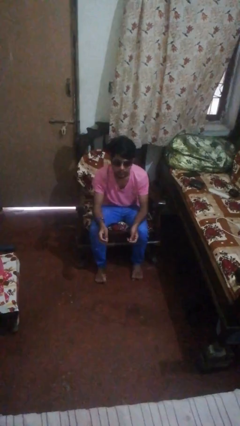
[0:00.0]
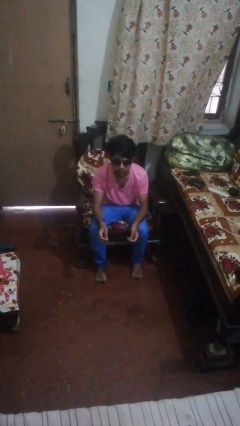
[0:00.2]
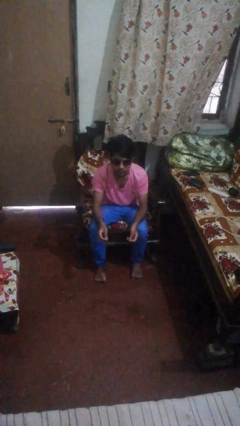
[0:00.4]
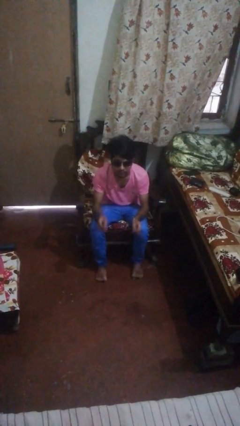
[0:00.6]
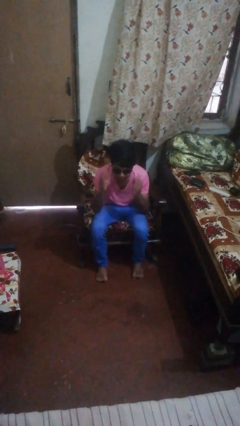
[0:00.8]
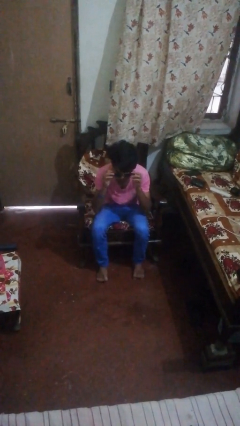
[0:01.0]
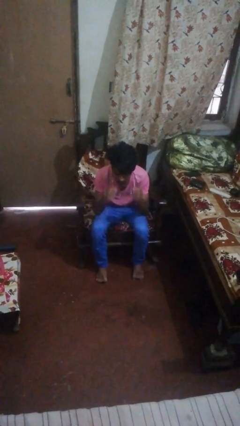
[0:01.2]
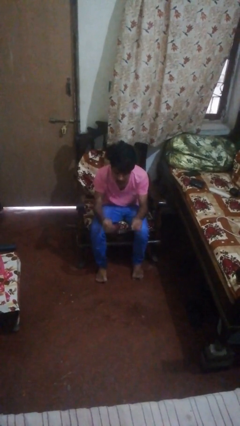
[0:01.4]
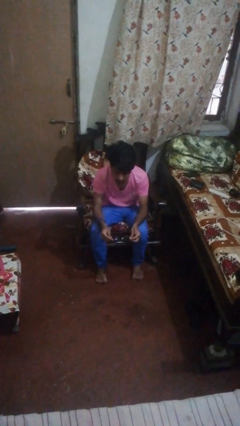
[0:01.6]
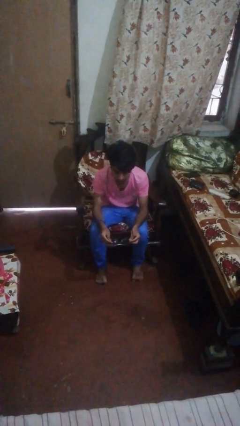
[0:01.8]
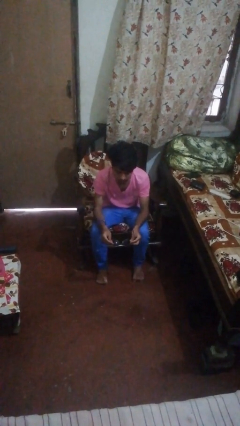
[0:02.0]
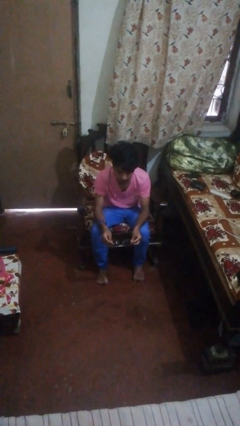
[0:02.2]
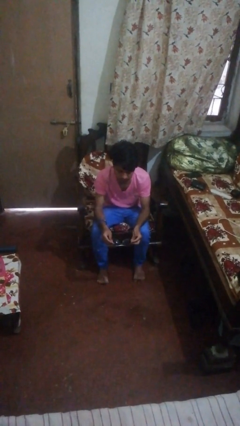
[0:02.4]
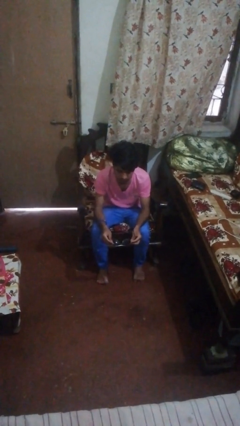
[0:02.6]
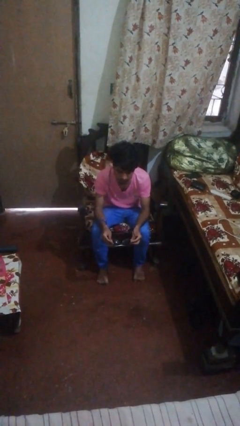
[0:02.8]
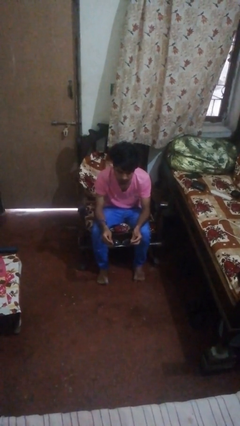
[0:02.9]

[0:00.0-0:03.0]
person takes off sunglasses

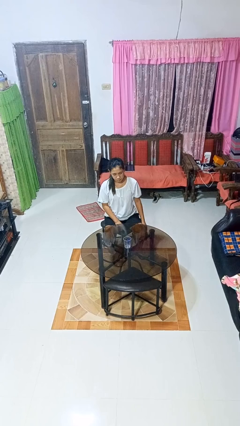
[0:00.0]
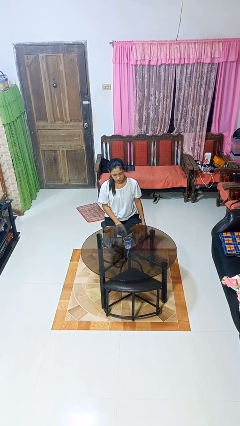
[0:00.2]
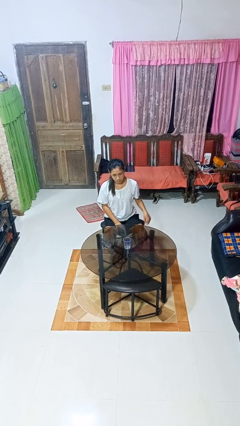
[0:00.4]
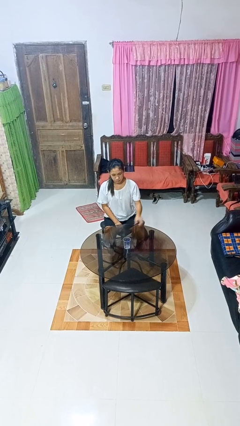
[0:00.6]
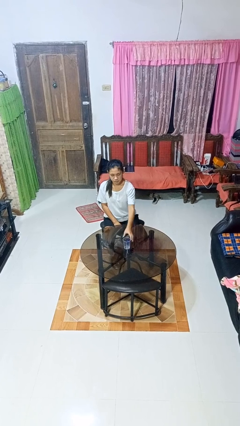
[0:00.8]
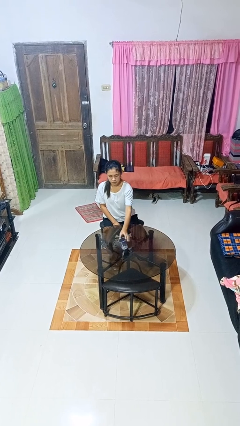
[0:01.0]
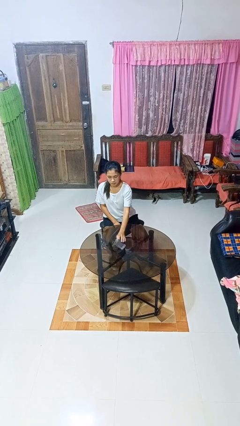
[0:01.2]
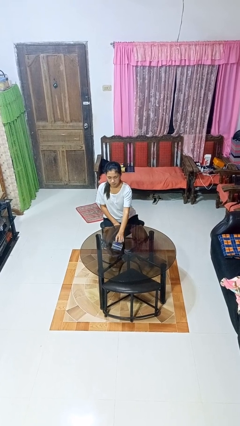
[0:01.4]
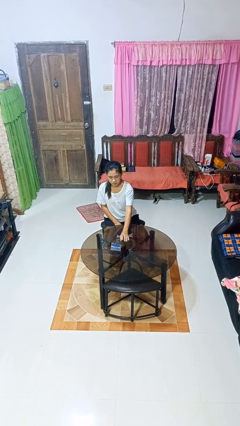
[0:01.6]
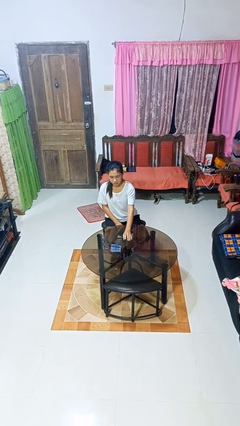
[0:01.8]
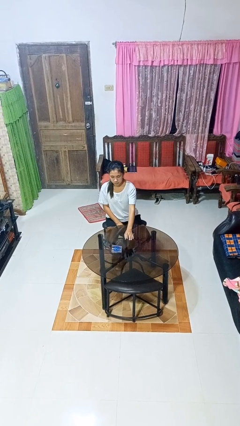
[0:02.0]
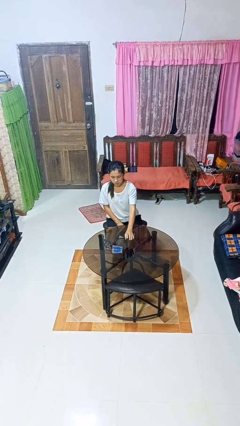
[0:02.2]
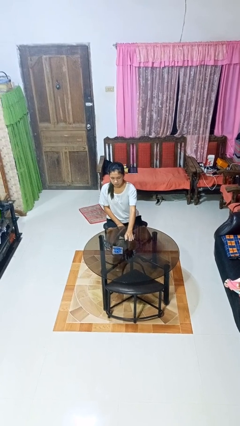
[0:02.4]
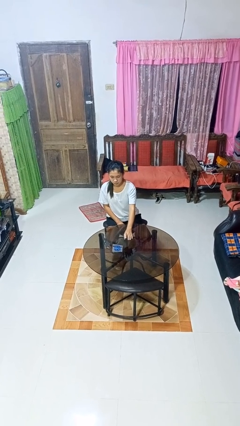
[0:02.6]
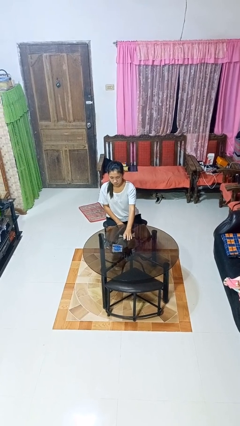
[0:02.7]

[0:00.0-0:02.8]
person knocks over glass

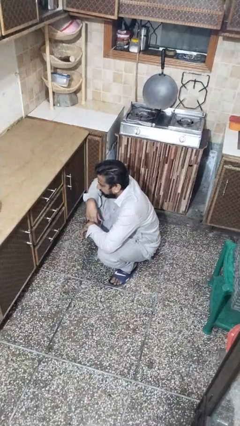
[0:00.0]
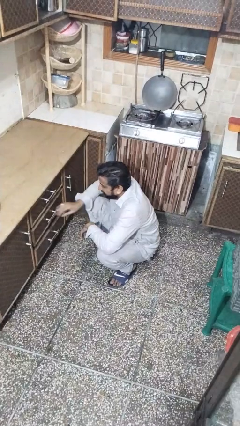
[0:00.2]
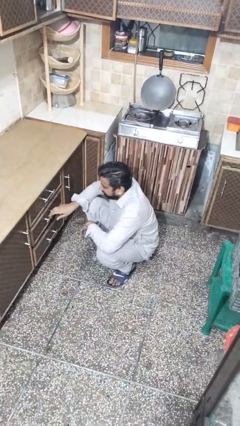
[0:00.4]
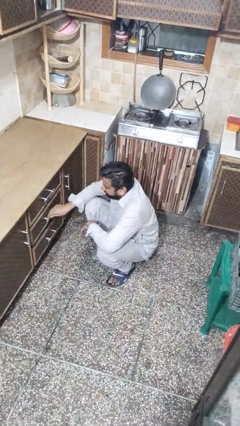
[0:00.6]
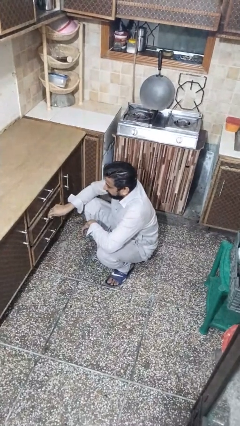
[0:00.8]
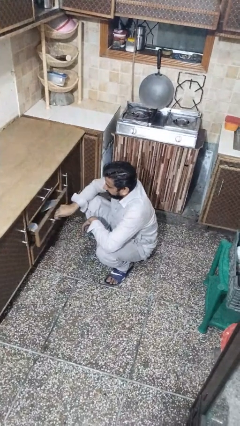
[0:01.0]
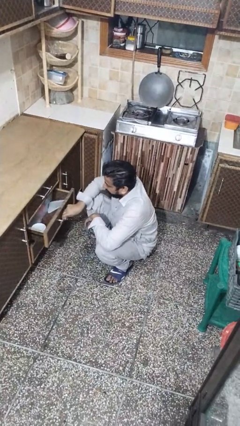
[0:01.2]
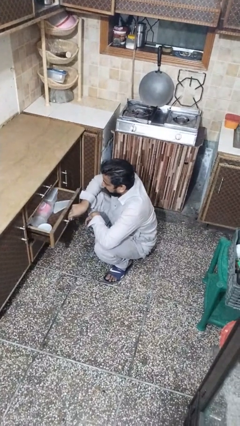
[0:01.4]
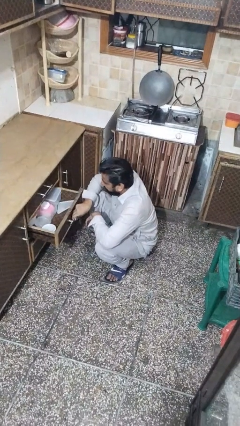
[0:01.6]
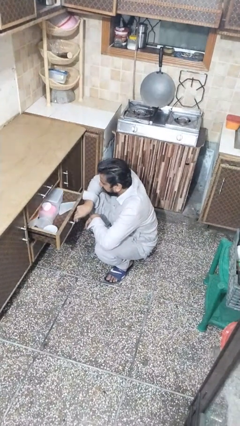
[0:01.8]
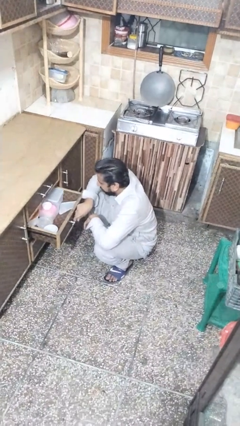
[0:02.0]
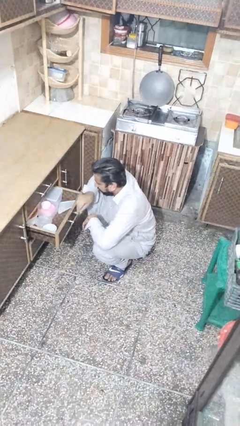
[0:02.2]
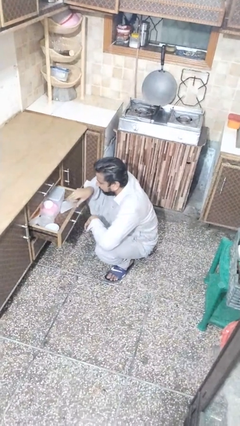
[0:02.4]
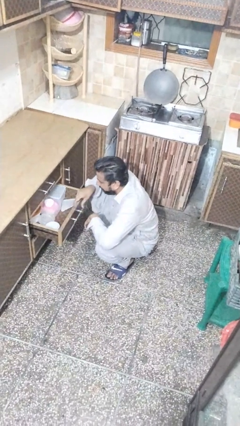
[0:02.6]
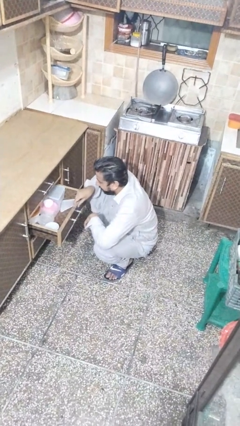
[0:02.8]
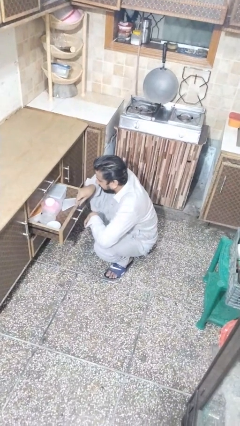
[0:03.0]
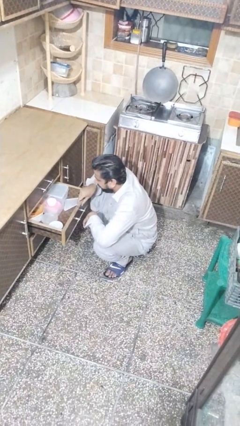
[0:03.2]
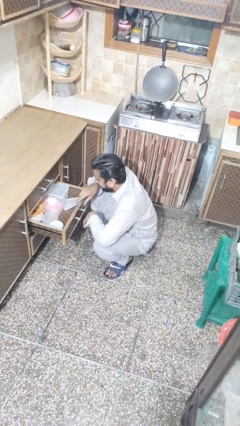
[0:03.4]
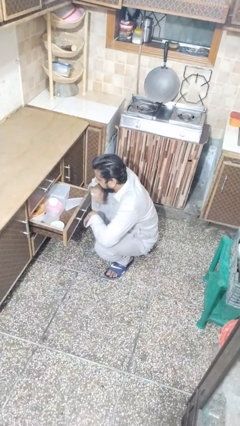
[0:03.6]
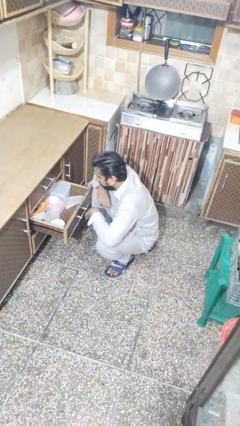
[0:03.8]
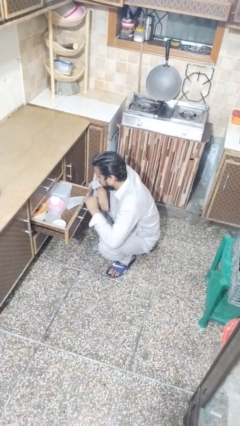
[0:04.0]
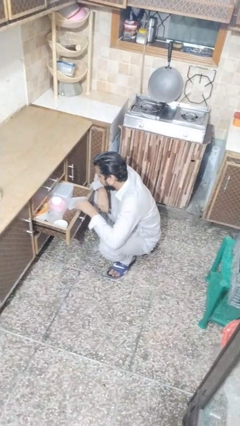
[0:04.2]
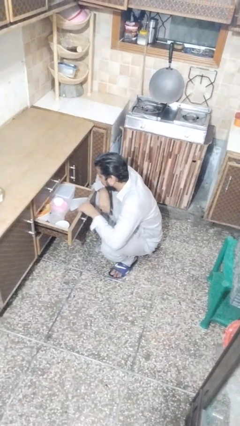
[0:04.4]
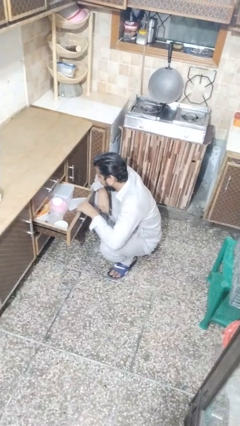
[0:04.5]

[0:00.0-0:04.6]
person opens kitchen drawer

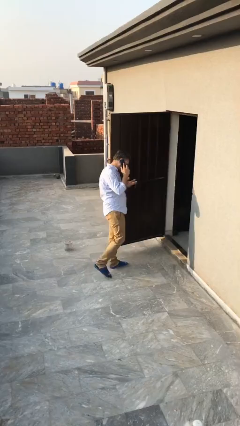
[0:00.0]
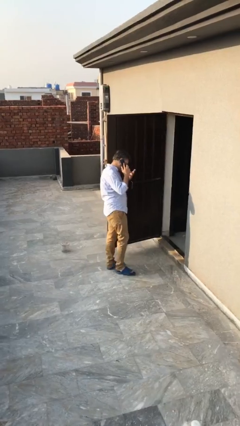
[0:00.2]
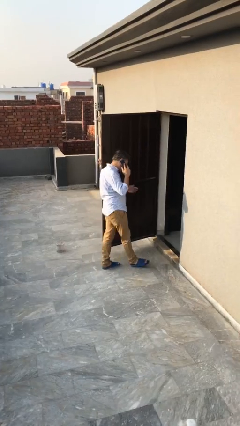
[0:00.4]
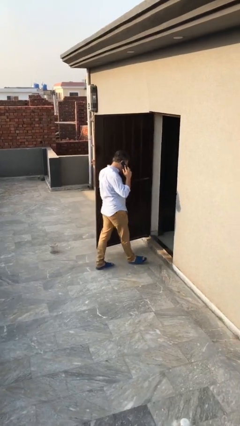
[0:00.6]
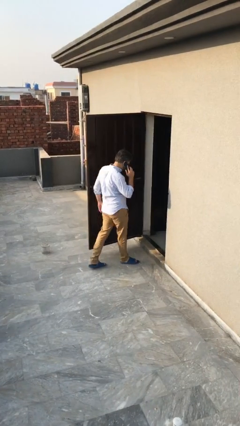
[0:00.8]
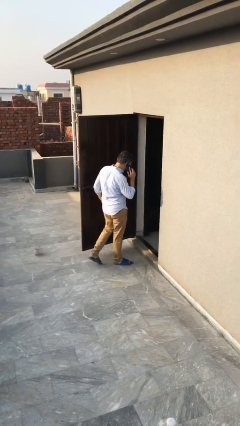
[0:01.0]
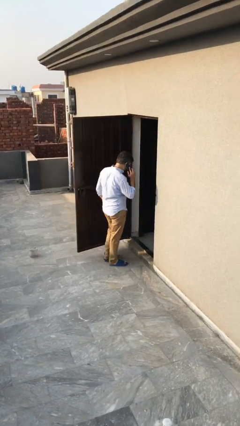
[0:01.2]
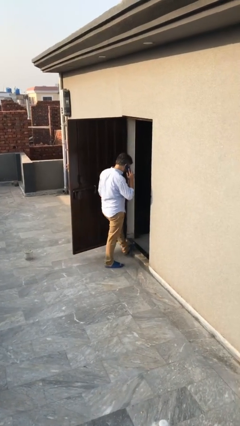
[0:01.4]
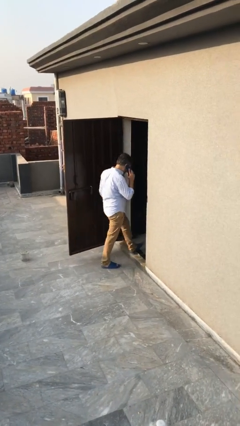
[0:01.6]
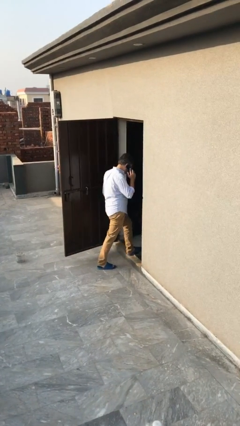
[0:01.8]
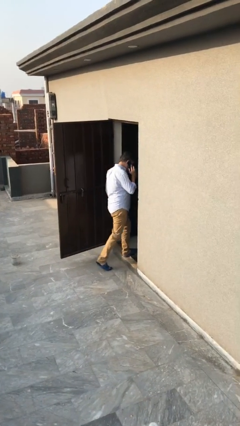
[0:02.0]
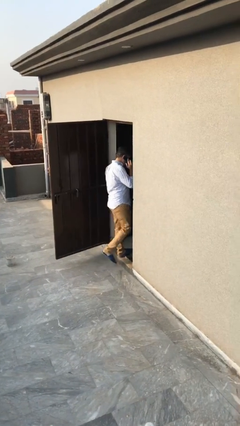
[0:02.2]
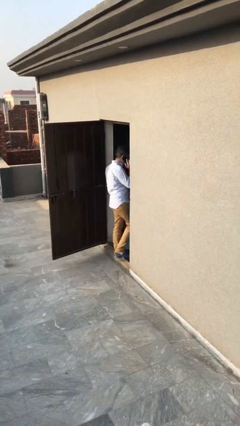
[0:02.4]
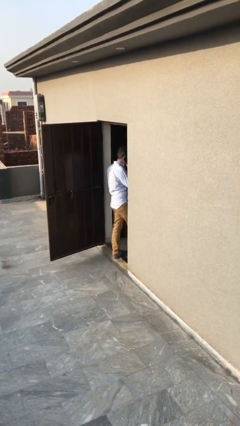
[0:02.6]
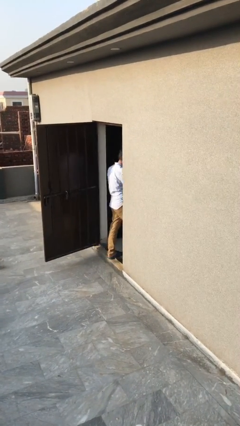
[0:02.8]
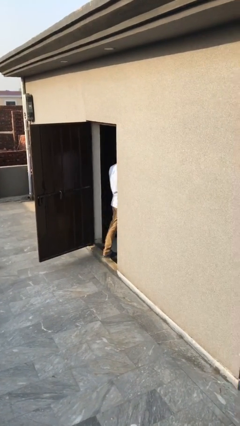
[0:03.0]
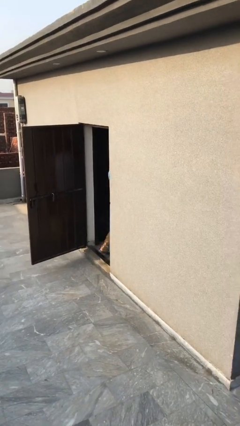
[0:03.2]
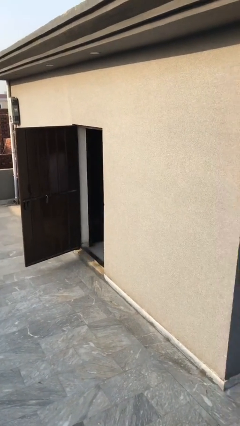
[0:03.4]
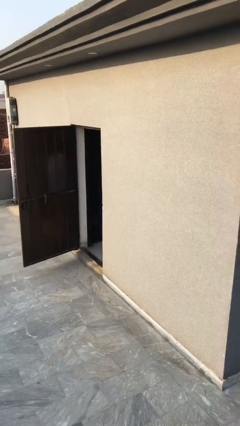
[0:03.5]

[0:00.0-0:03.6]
person exits scene through structure

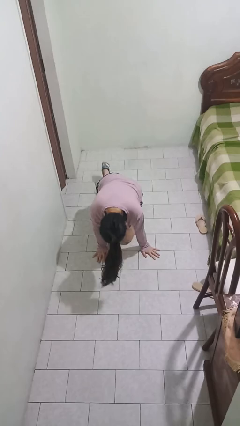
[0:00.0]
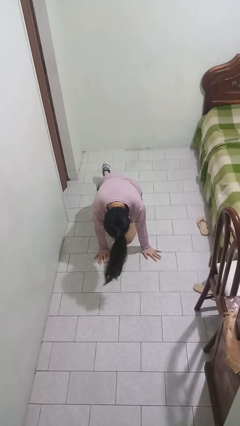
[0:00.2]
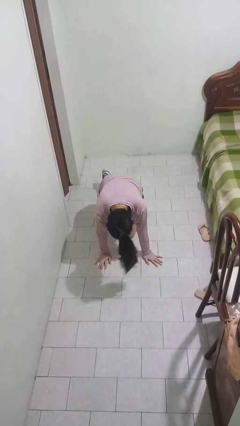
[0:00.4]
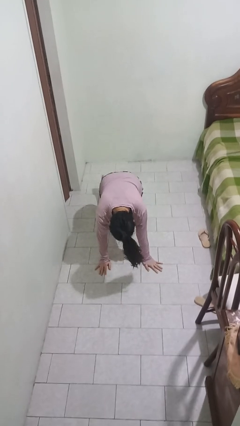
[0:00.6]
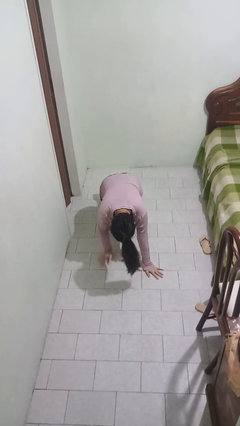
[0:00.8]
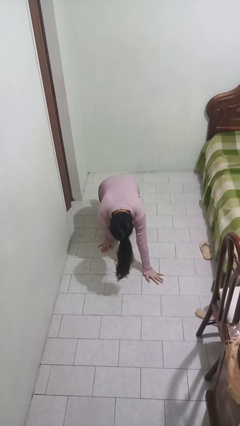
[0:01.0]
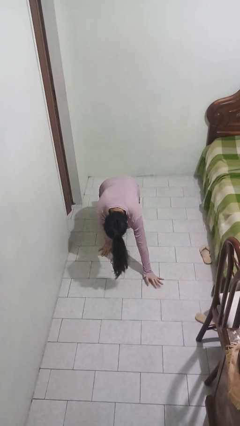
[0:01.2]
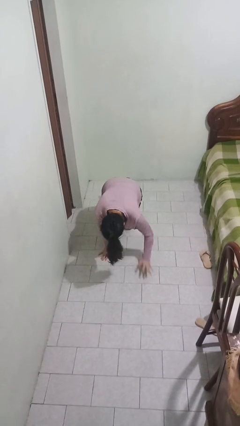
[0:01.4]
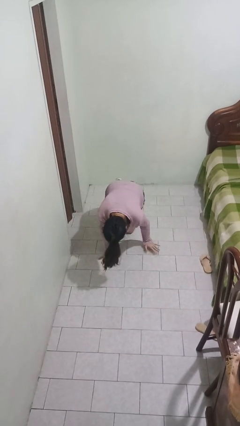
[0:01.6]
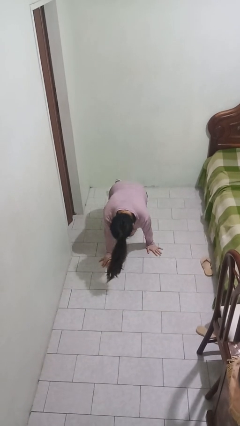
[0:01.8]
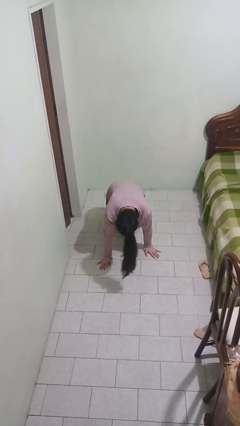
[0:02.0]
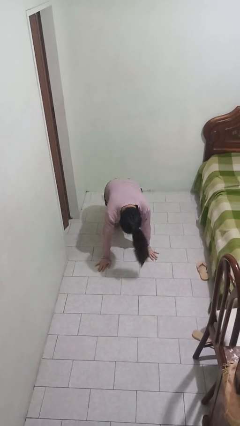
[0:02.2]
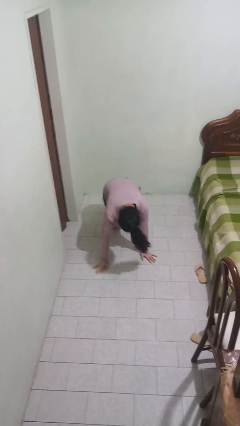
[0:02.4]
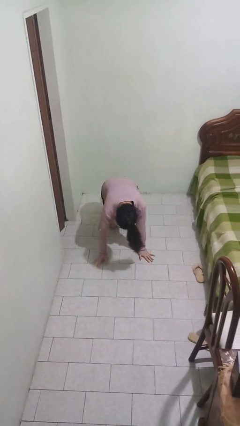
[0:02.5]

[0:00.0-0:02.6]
person crawls

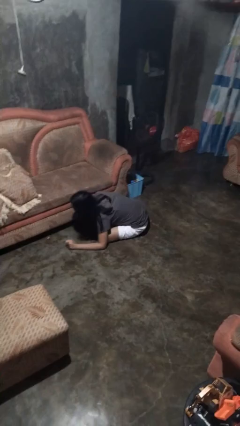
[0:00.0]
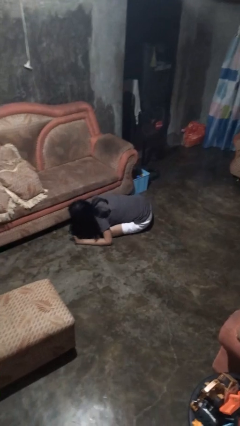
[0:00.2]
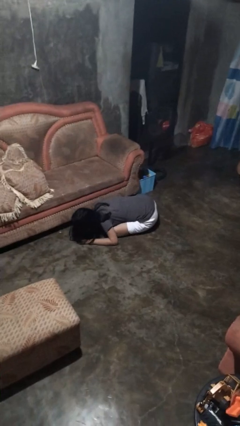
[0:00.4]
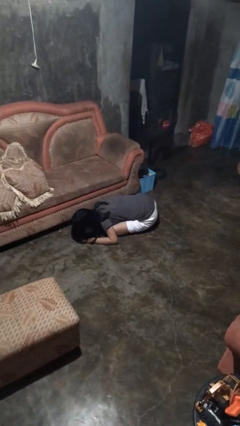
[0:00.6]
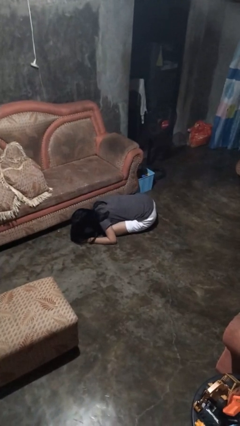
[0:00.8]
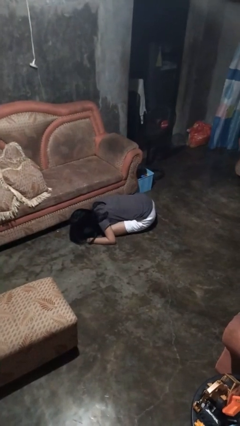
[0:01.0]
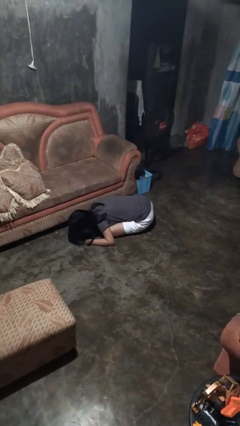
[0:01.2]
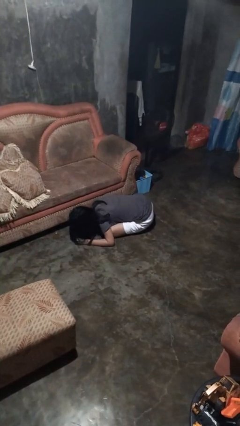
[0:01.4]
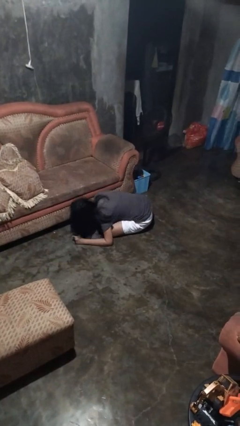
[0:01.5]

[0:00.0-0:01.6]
person searches under couch
